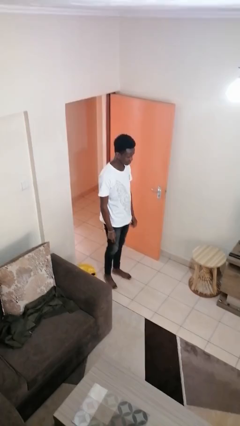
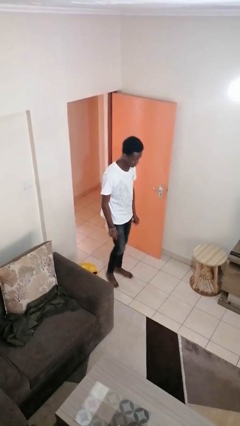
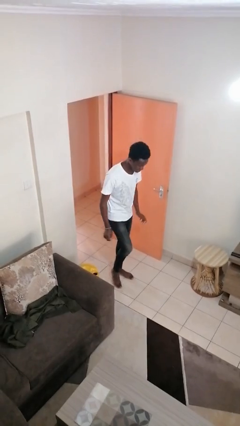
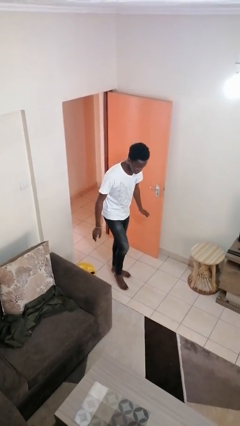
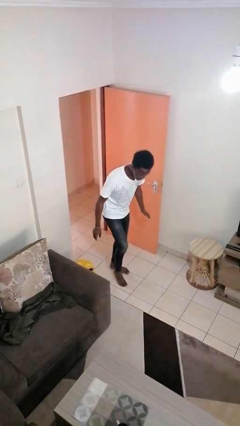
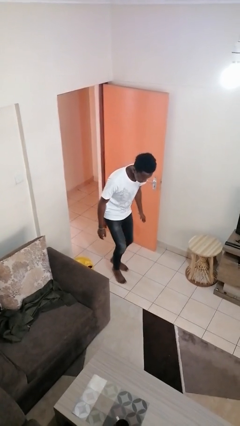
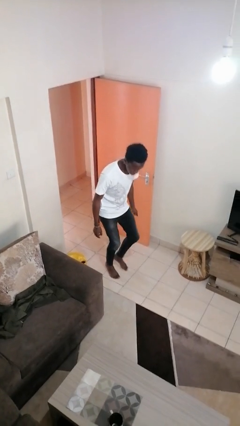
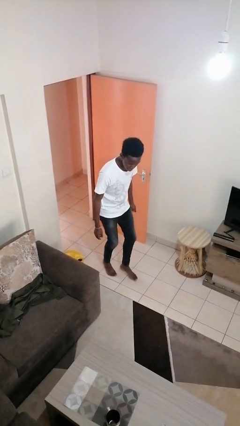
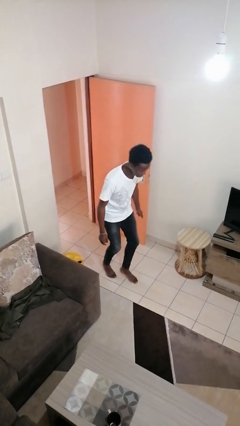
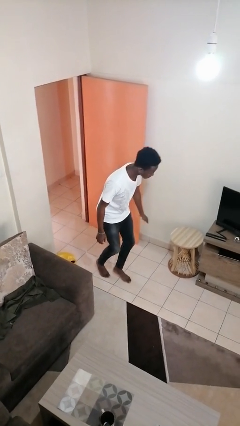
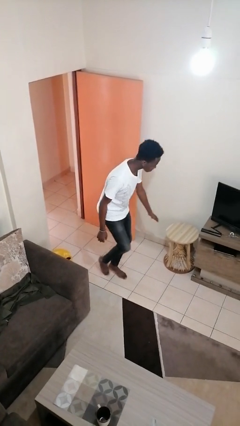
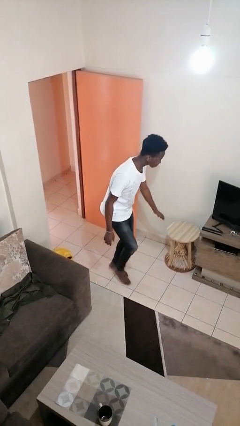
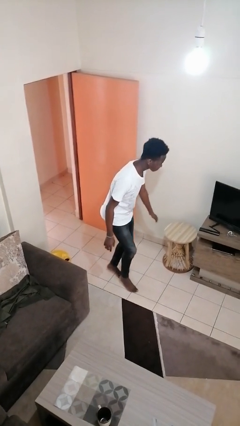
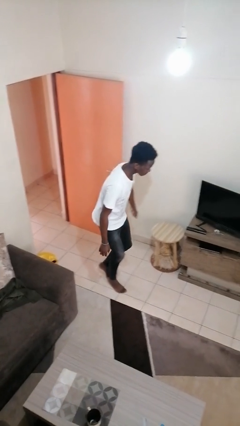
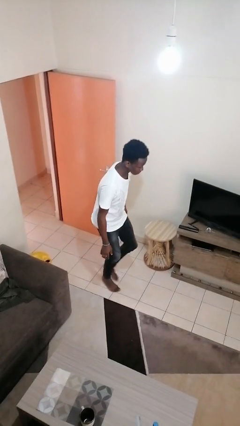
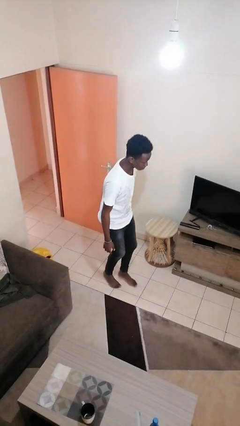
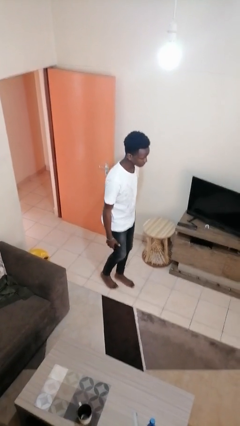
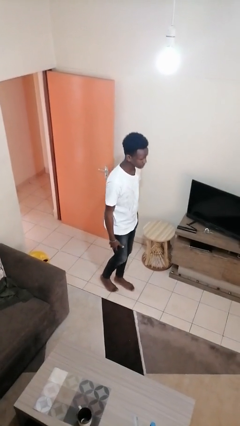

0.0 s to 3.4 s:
person walks tiptoe

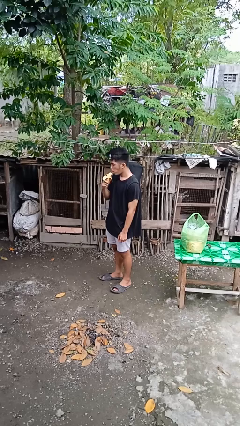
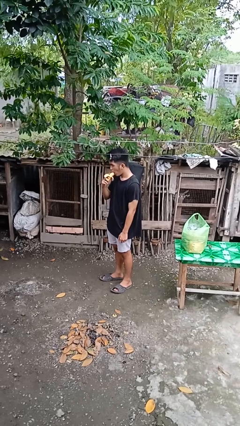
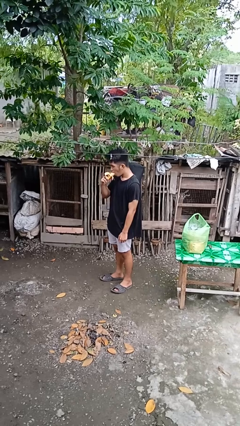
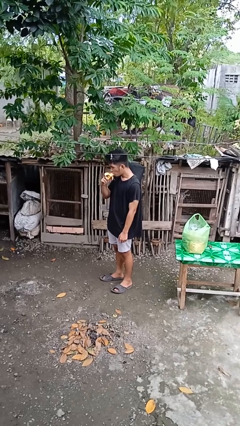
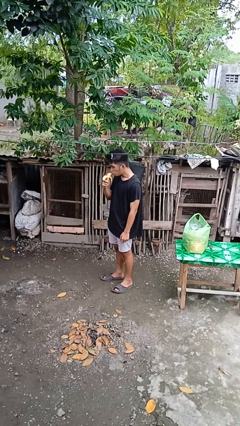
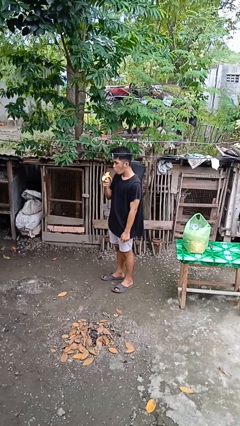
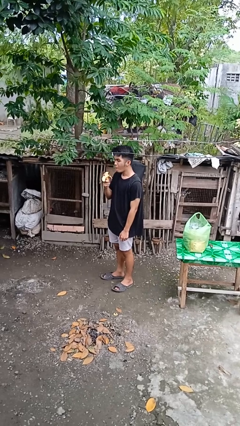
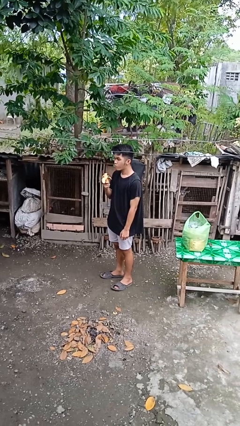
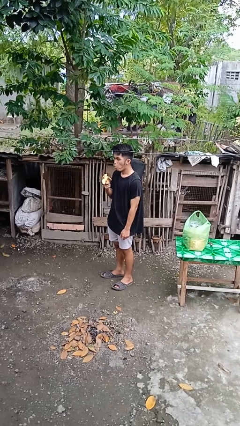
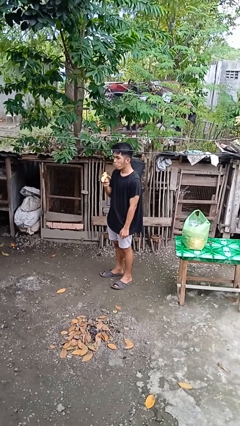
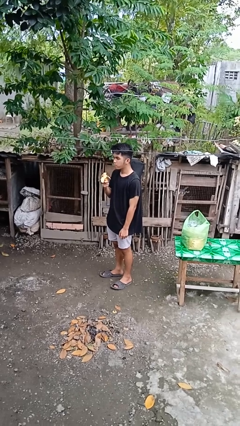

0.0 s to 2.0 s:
person eats banana

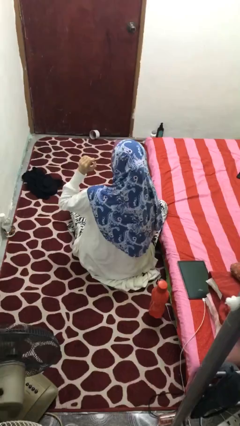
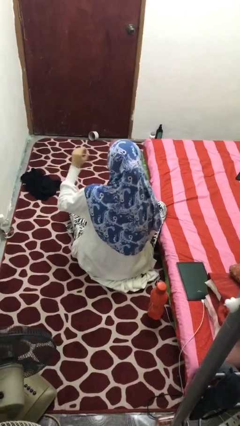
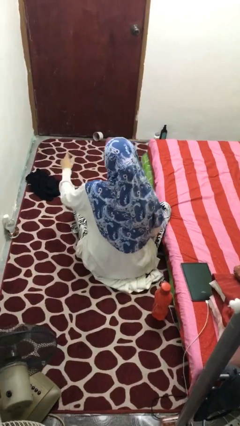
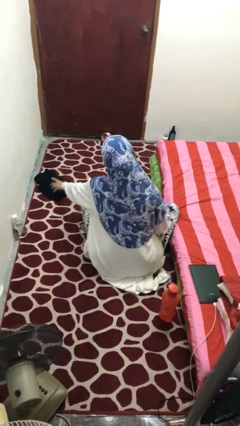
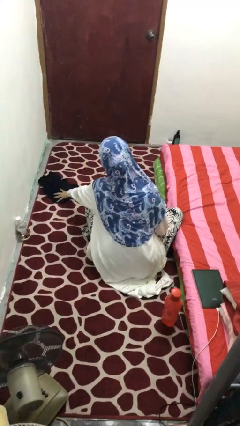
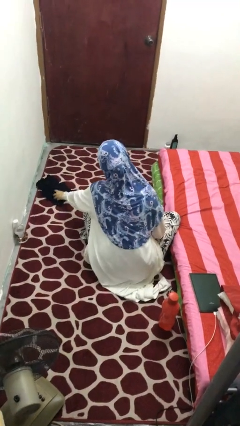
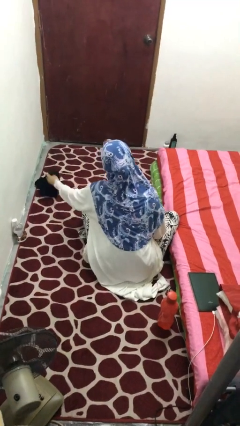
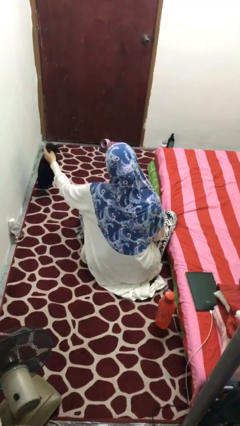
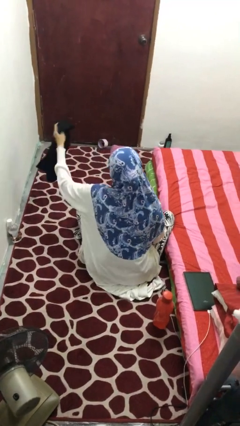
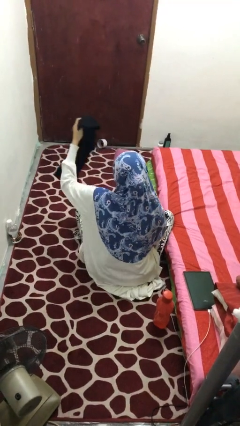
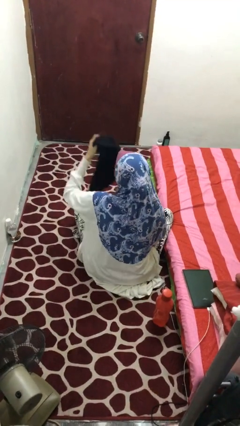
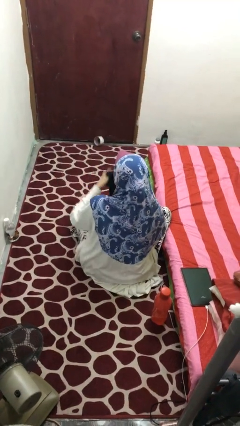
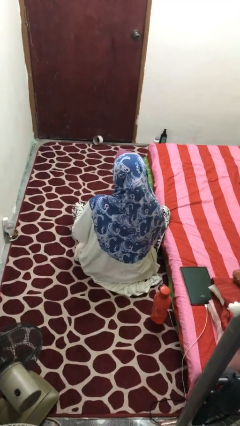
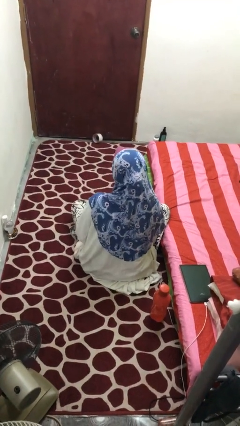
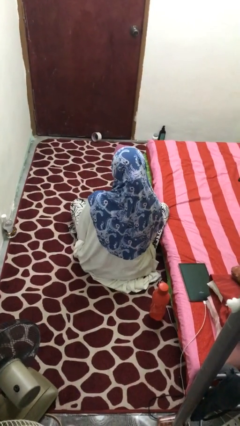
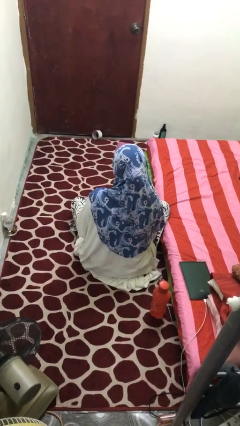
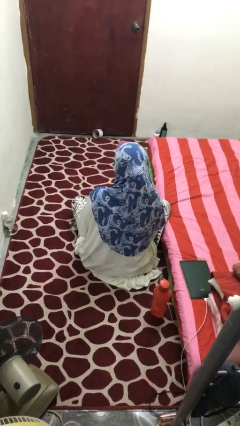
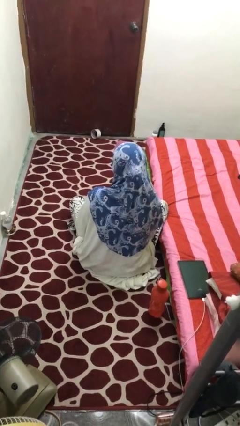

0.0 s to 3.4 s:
person picks up object from floor

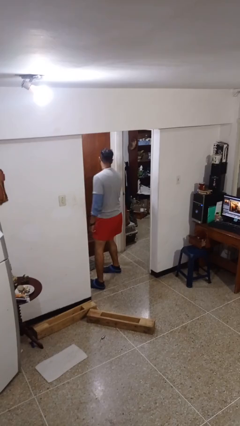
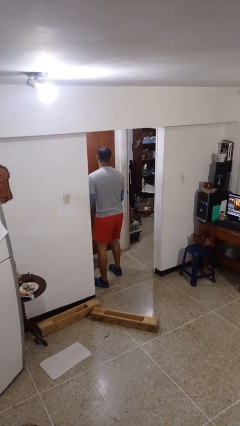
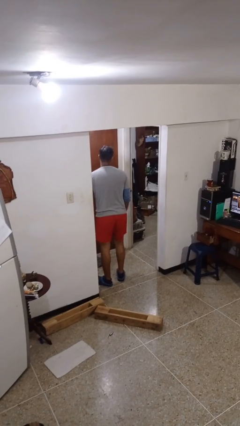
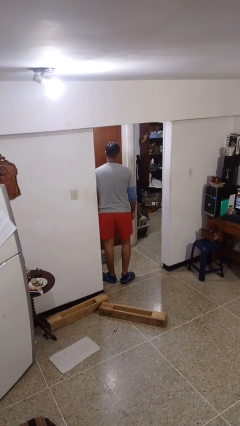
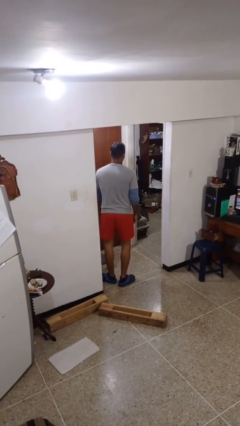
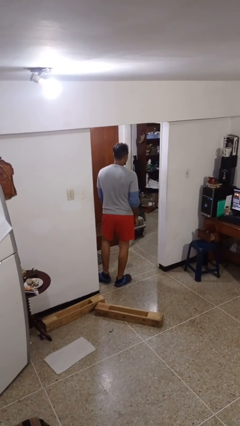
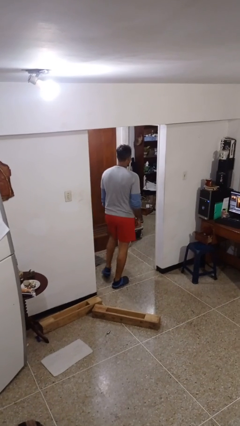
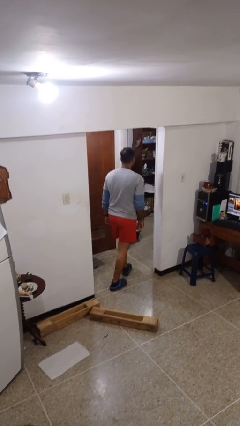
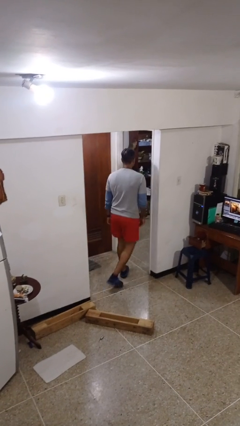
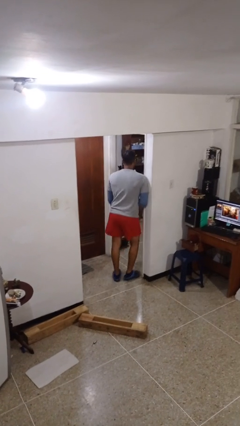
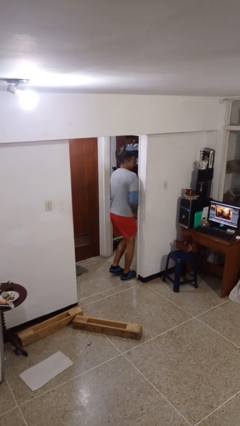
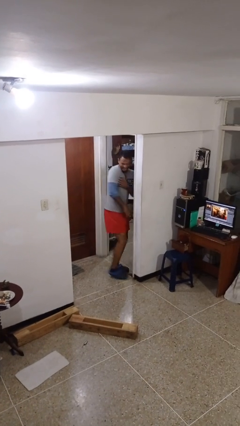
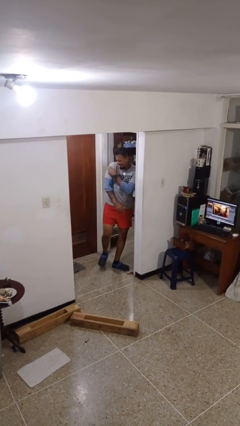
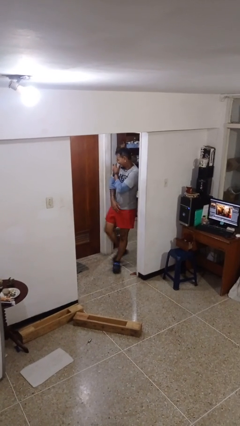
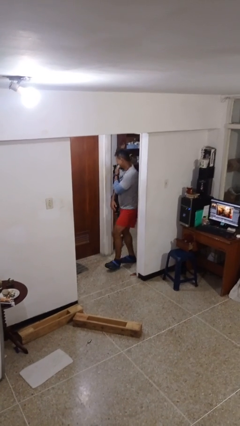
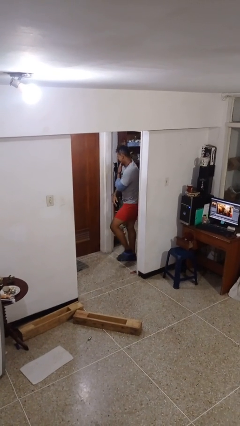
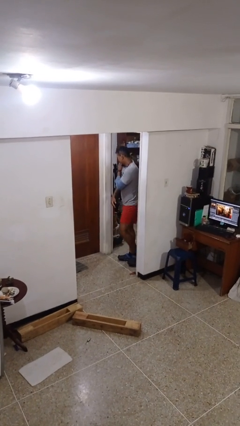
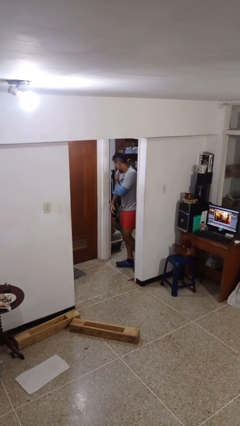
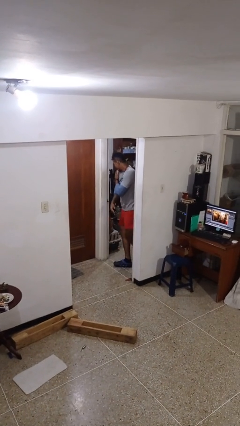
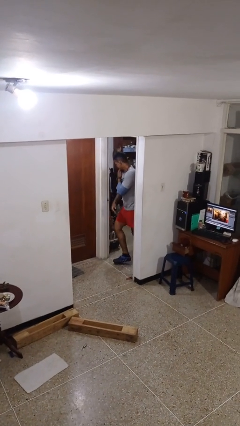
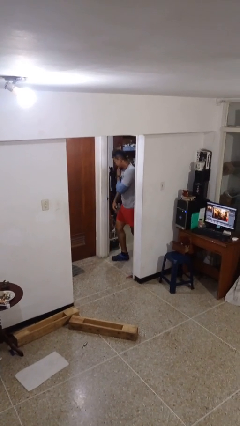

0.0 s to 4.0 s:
person bumps into wall

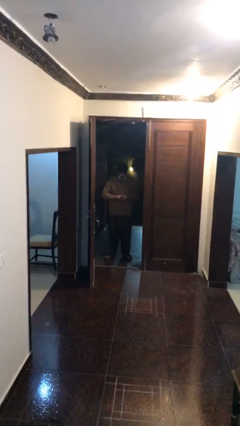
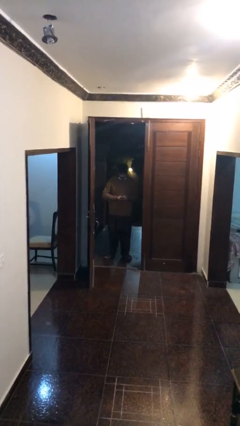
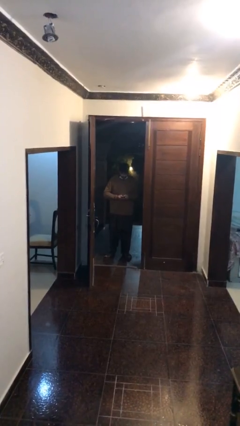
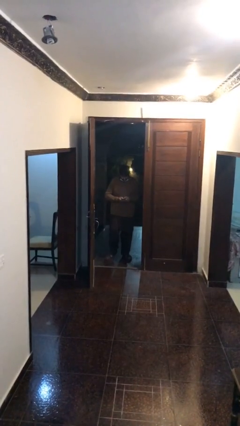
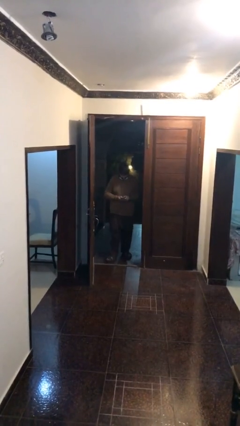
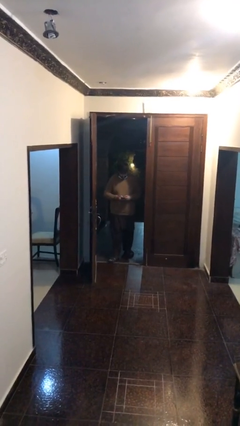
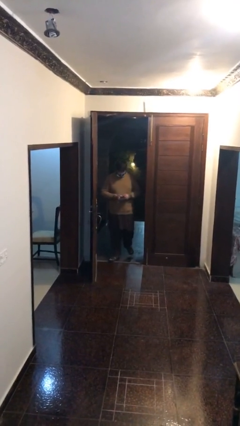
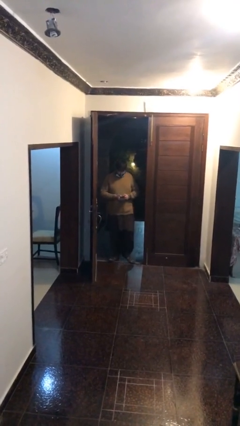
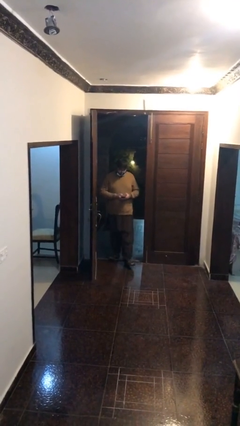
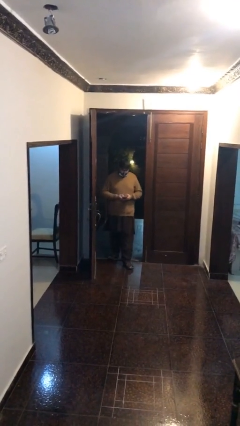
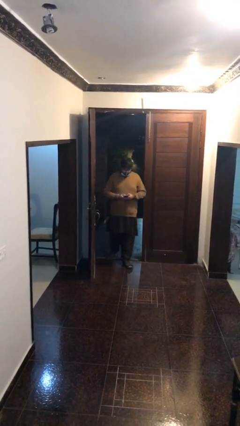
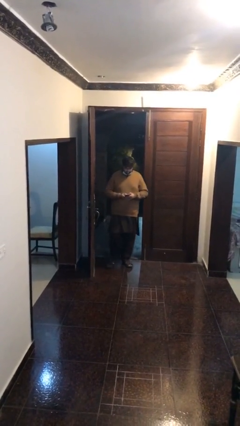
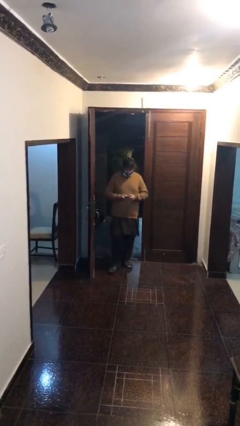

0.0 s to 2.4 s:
person enters scene through structure

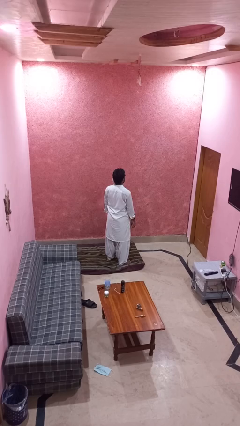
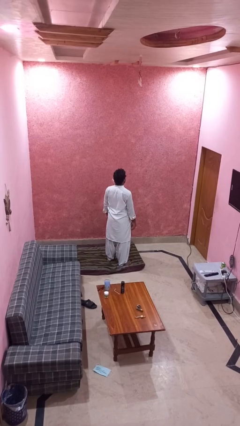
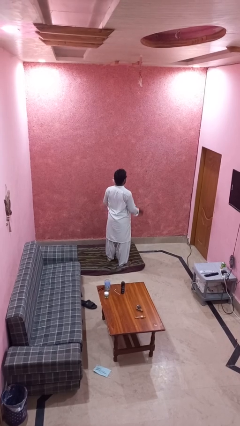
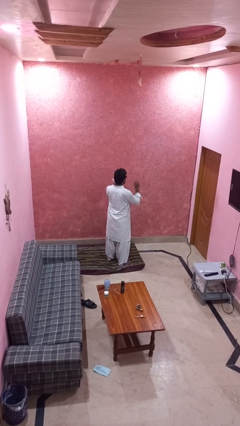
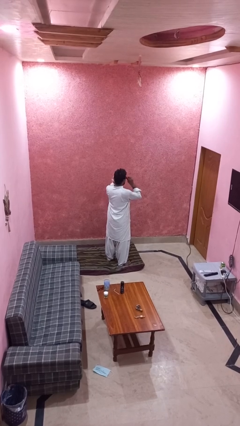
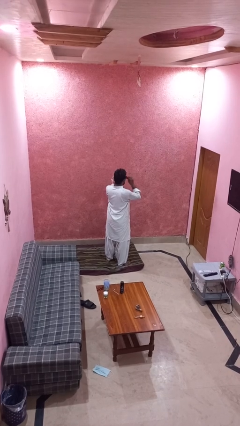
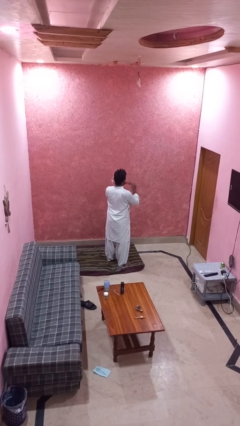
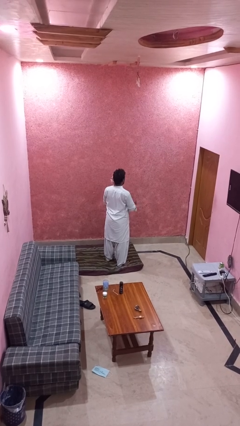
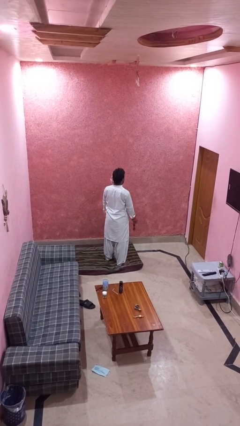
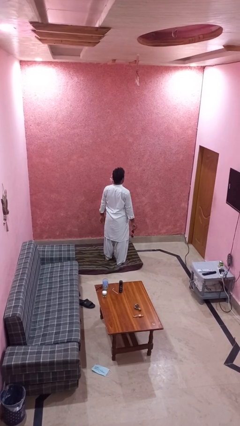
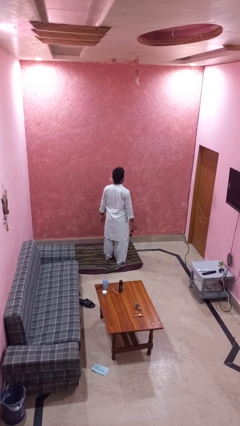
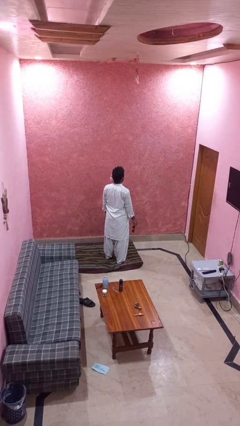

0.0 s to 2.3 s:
person takes off sunglasses
